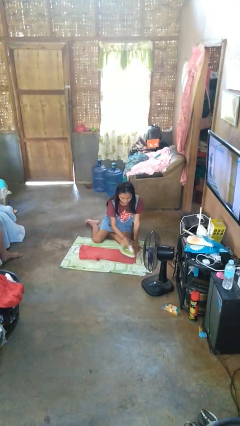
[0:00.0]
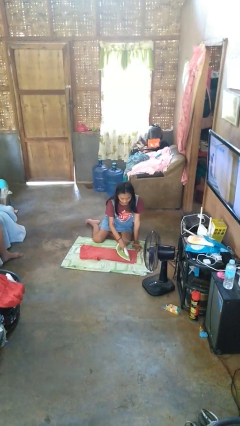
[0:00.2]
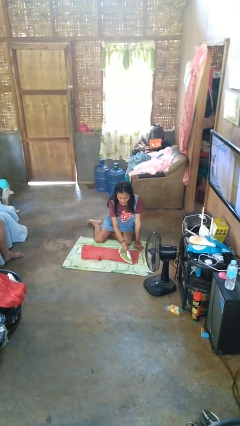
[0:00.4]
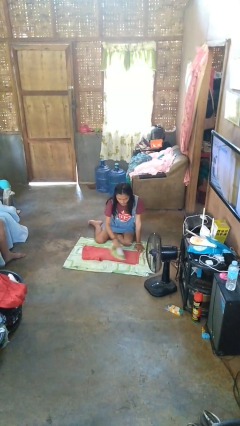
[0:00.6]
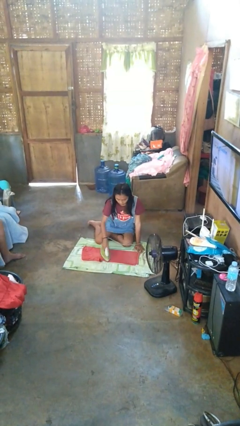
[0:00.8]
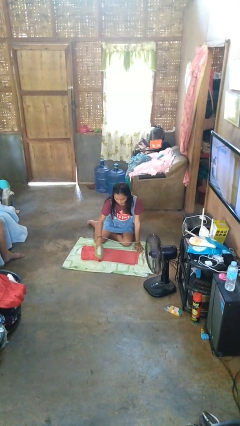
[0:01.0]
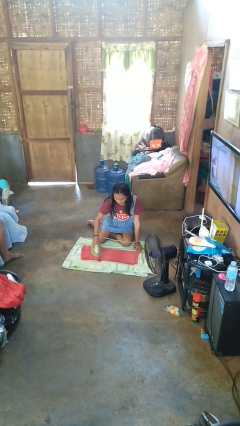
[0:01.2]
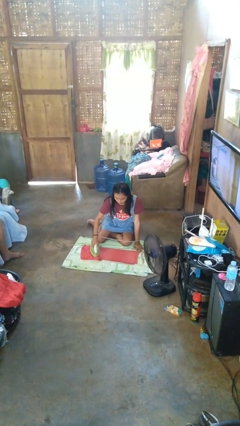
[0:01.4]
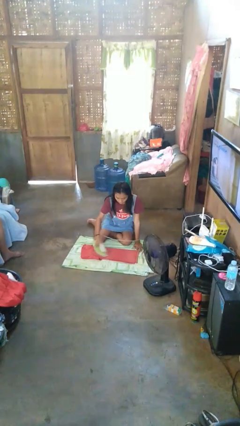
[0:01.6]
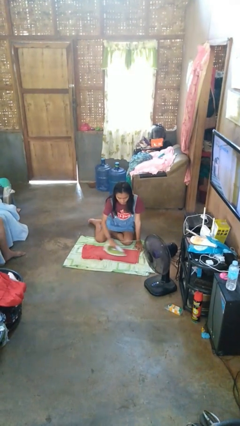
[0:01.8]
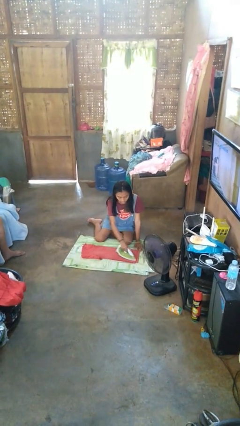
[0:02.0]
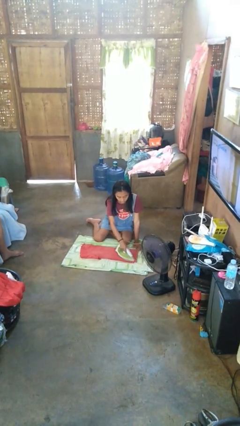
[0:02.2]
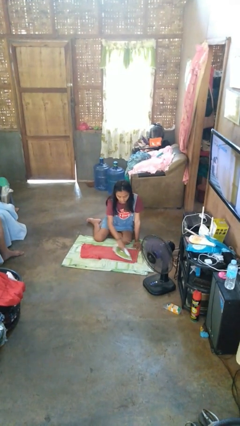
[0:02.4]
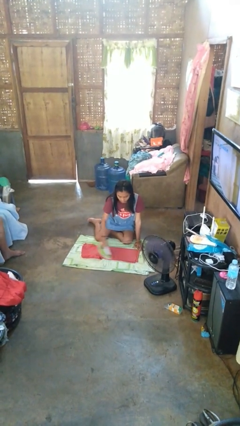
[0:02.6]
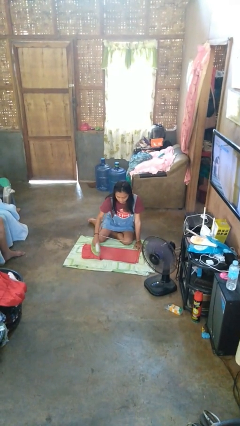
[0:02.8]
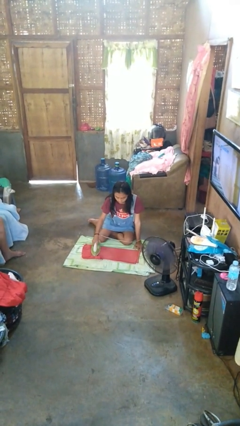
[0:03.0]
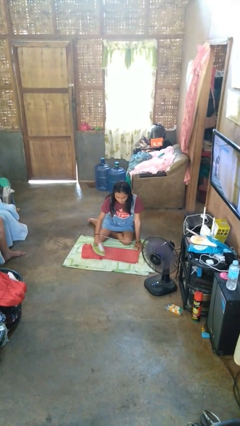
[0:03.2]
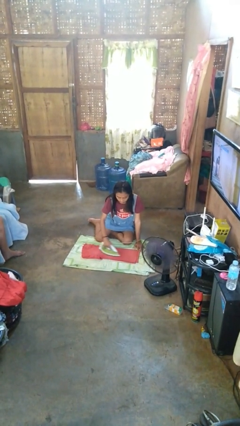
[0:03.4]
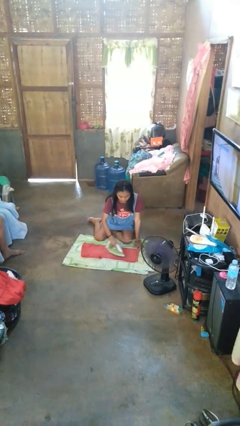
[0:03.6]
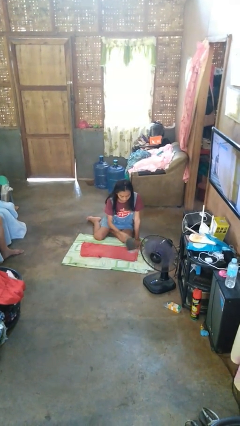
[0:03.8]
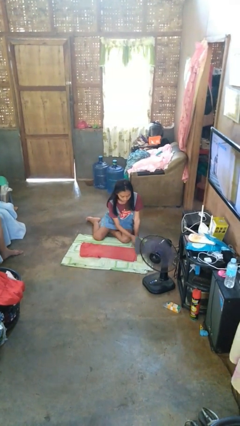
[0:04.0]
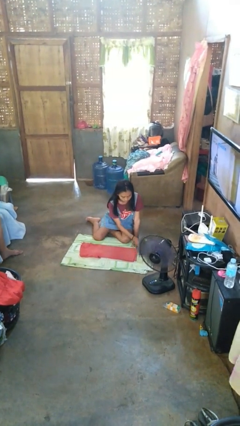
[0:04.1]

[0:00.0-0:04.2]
person irons clothes

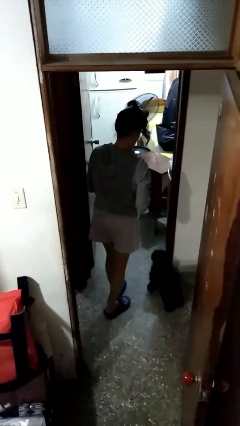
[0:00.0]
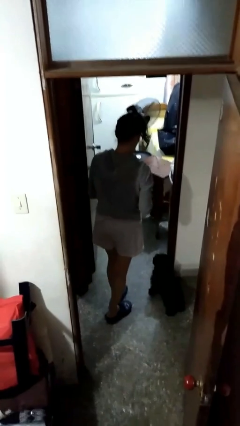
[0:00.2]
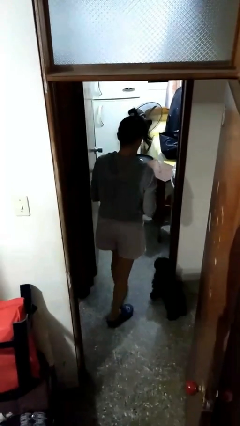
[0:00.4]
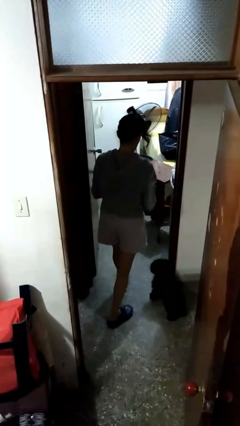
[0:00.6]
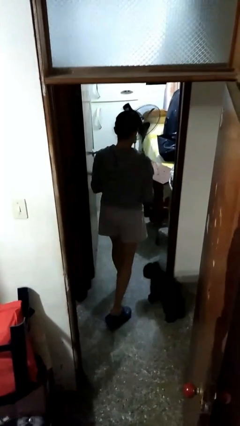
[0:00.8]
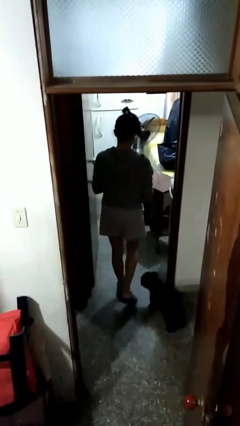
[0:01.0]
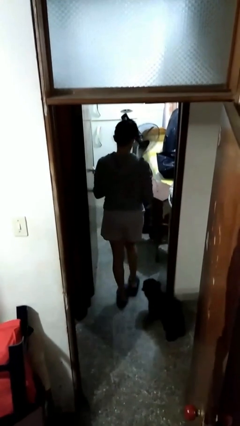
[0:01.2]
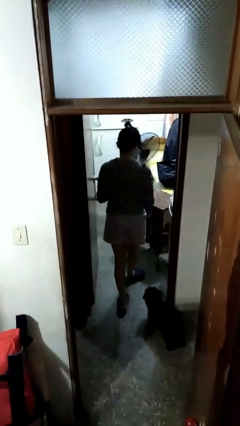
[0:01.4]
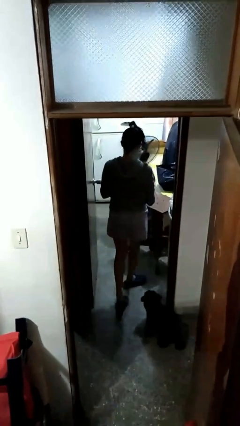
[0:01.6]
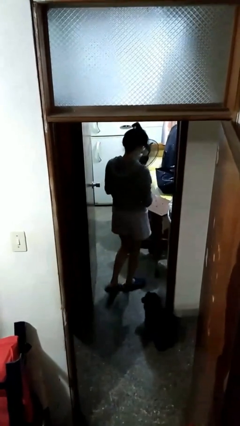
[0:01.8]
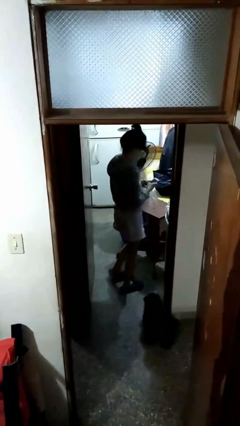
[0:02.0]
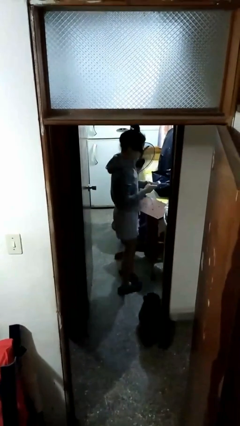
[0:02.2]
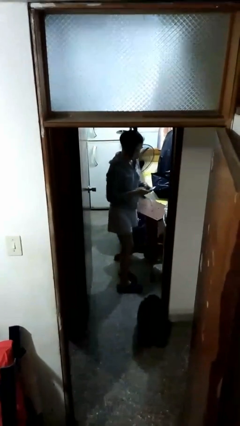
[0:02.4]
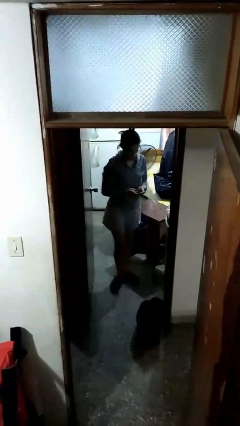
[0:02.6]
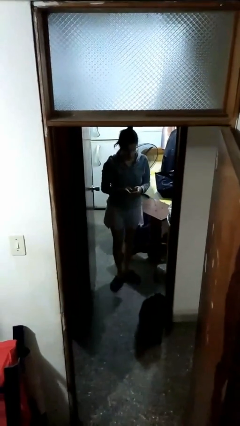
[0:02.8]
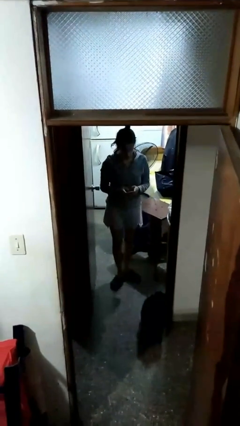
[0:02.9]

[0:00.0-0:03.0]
person exits scene through structure

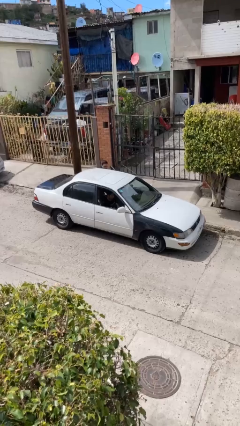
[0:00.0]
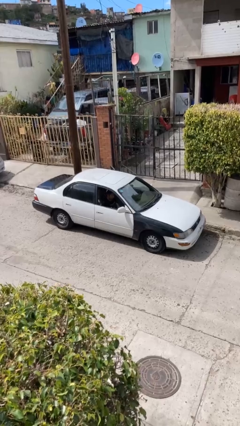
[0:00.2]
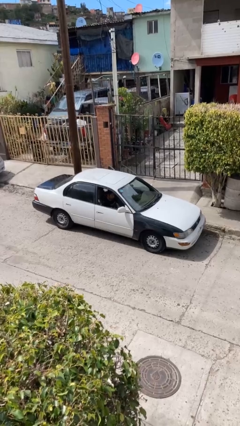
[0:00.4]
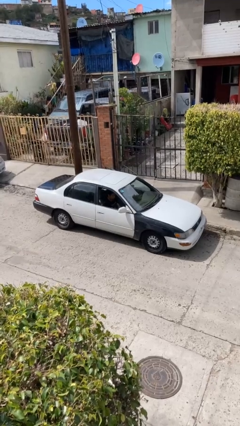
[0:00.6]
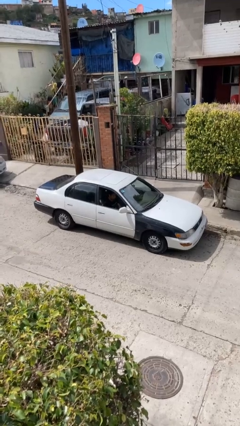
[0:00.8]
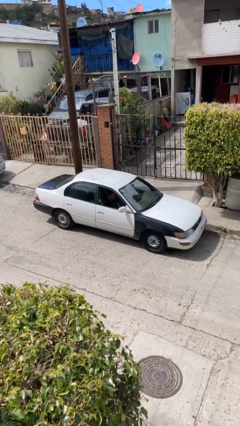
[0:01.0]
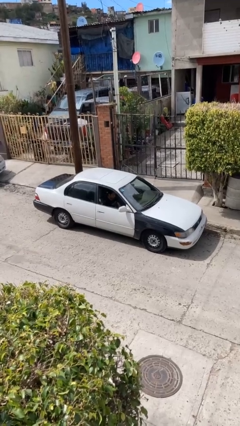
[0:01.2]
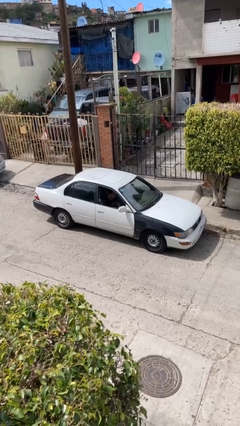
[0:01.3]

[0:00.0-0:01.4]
car picks up person

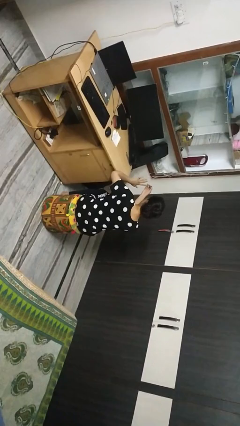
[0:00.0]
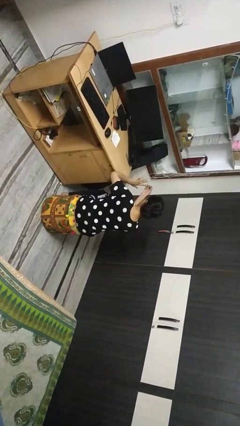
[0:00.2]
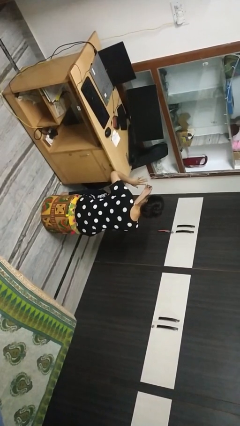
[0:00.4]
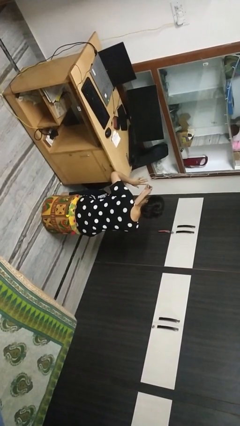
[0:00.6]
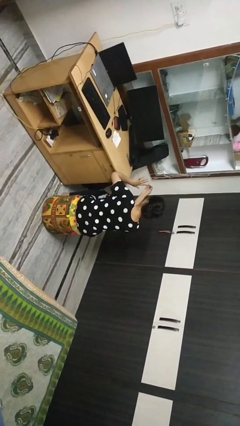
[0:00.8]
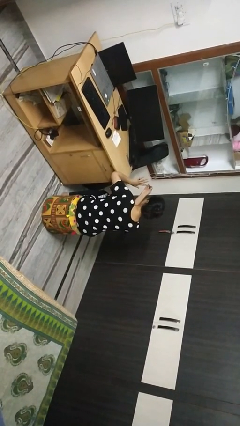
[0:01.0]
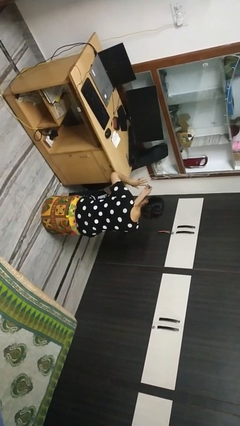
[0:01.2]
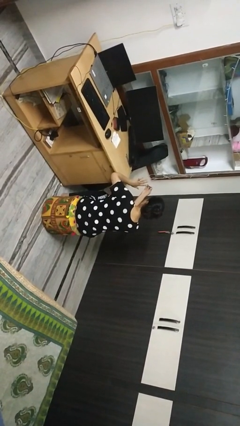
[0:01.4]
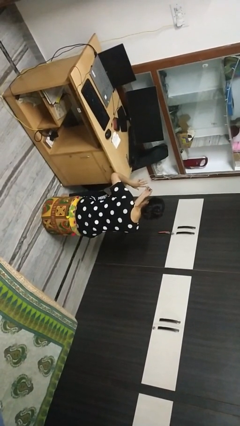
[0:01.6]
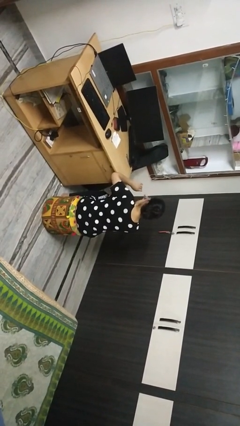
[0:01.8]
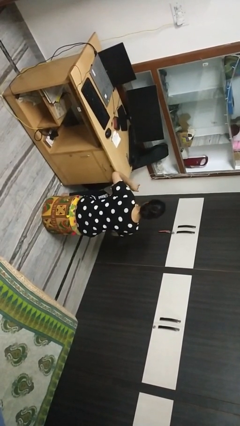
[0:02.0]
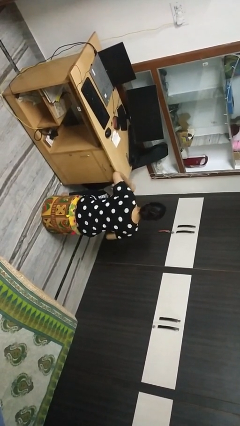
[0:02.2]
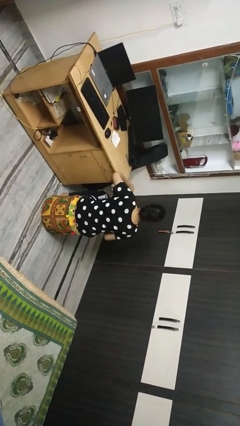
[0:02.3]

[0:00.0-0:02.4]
person clips fingernails

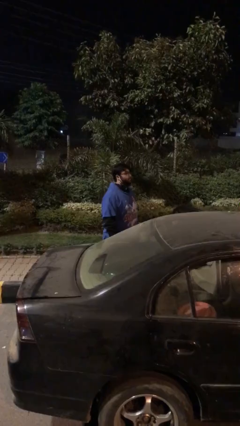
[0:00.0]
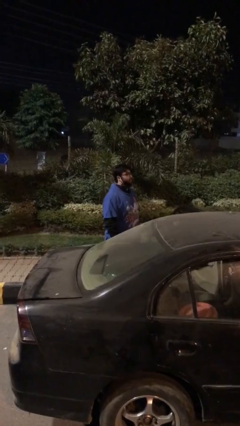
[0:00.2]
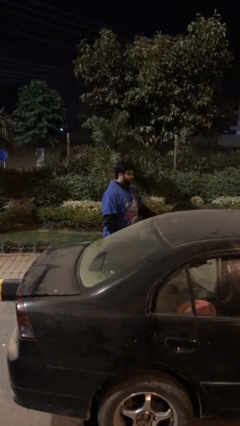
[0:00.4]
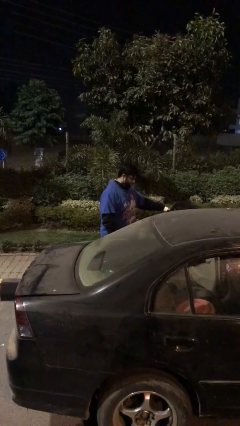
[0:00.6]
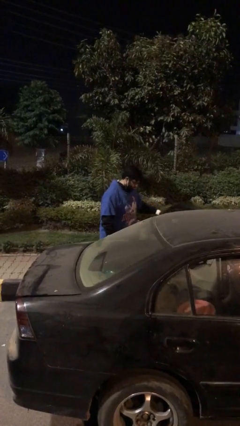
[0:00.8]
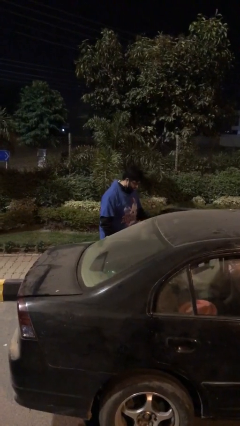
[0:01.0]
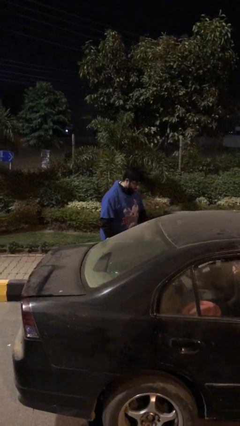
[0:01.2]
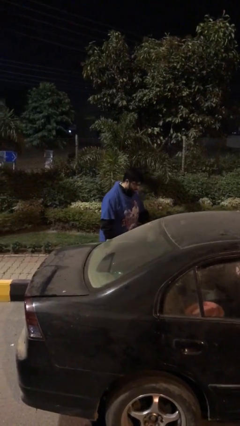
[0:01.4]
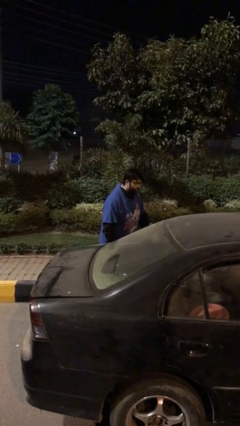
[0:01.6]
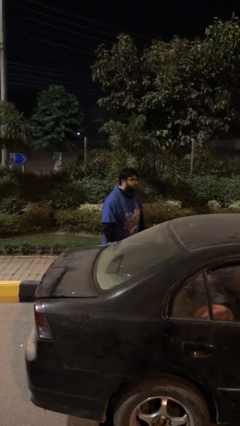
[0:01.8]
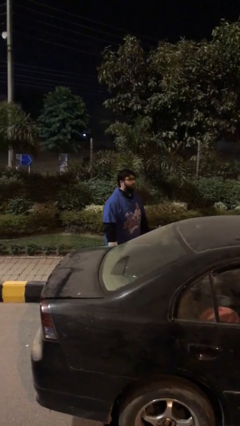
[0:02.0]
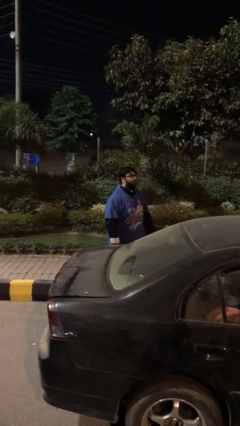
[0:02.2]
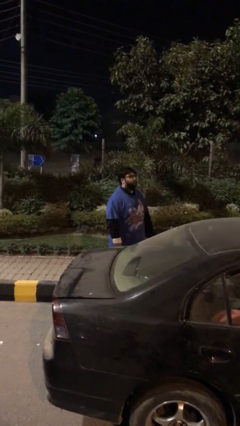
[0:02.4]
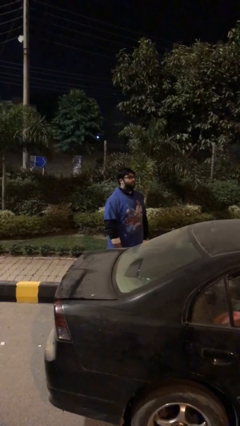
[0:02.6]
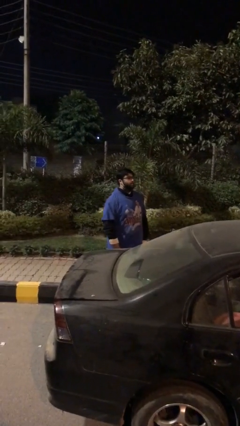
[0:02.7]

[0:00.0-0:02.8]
person closes car door

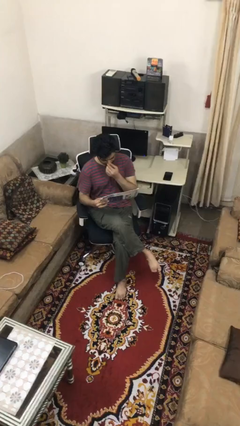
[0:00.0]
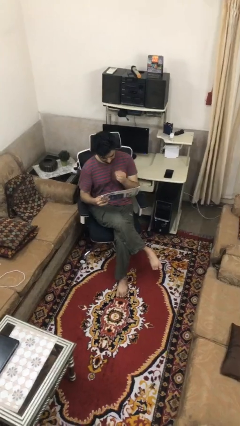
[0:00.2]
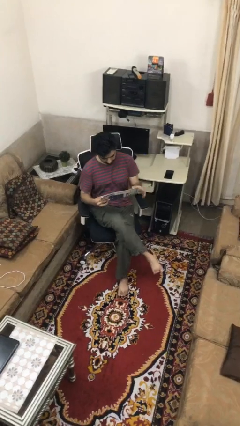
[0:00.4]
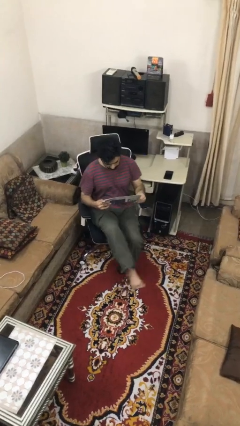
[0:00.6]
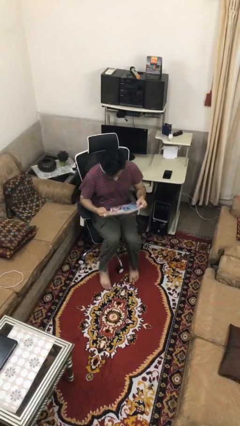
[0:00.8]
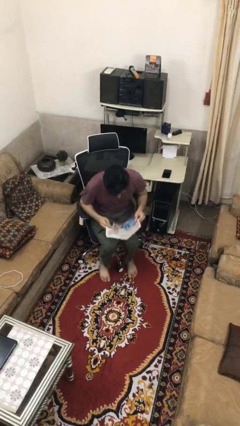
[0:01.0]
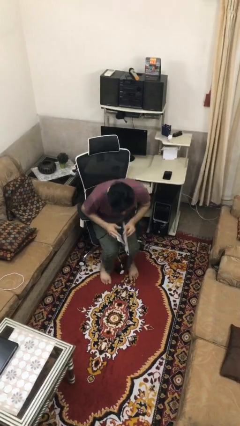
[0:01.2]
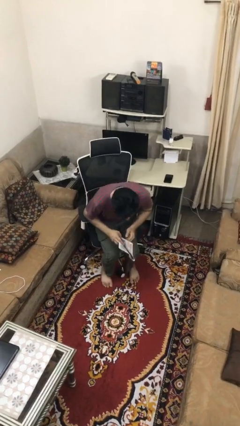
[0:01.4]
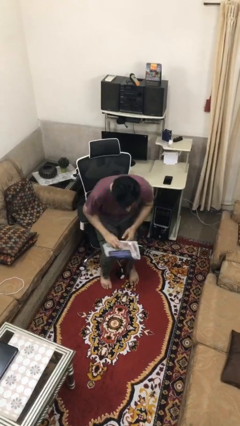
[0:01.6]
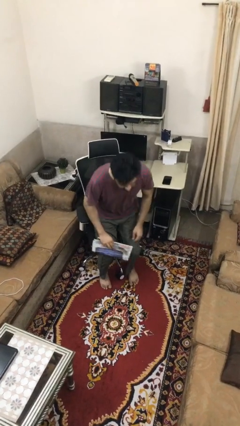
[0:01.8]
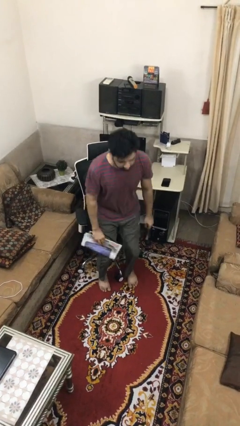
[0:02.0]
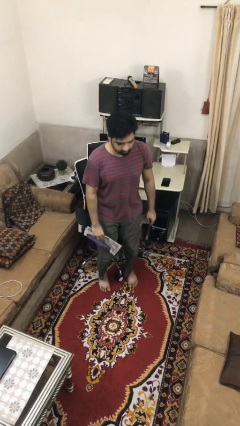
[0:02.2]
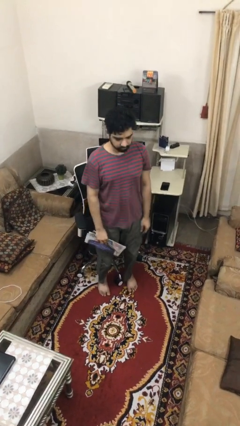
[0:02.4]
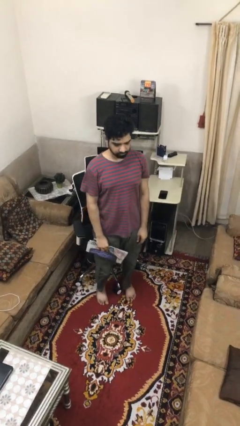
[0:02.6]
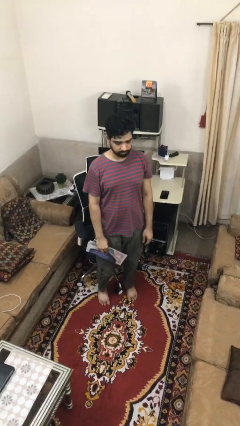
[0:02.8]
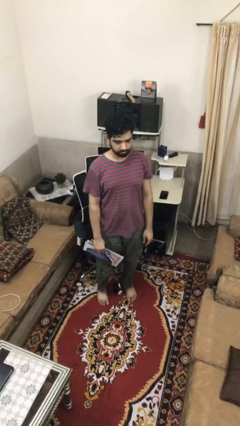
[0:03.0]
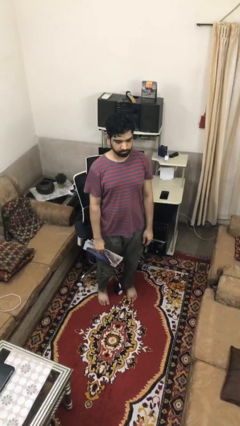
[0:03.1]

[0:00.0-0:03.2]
person stands up

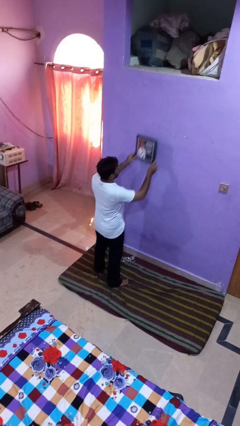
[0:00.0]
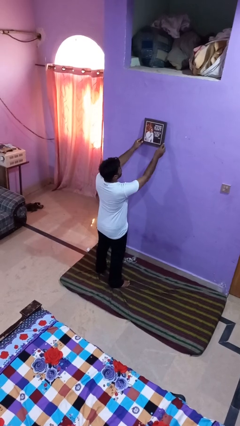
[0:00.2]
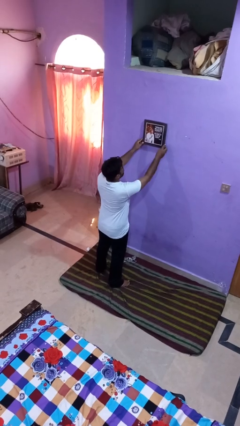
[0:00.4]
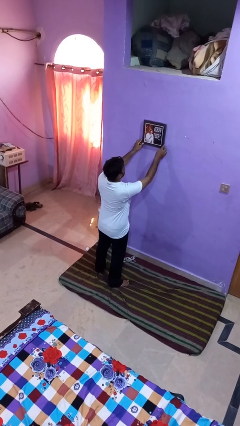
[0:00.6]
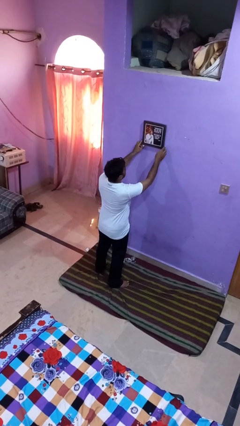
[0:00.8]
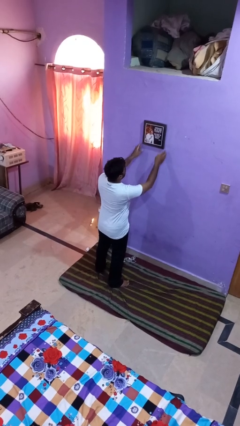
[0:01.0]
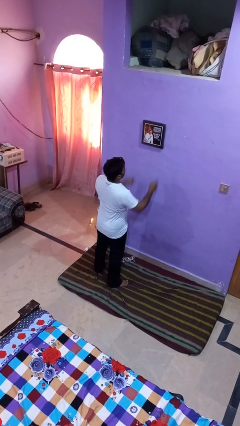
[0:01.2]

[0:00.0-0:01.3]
person takes down picture frame
